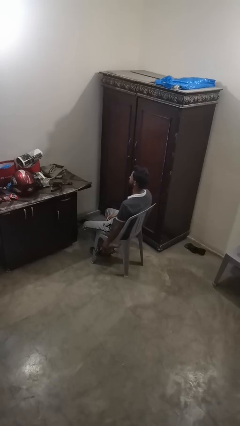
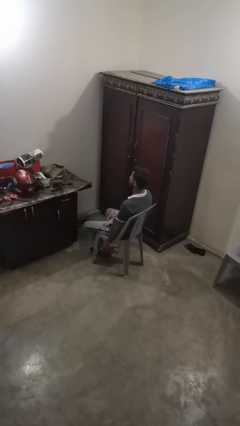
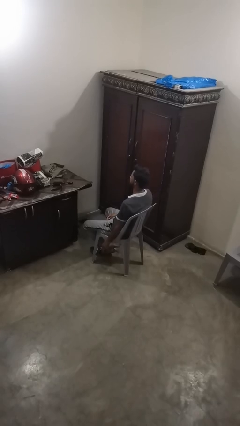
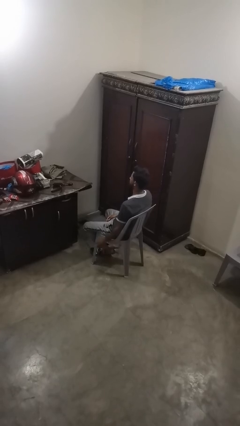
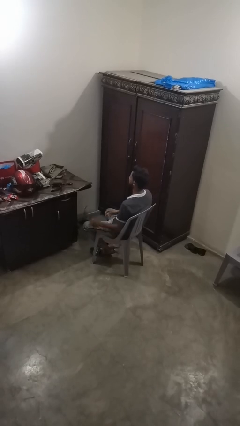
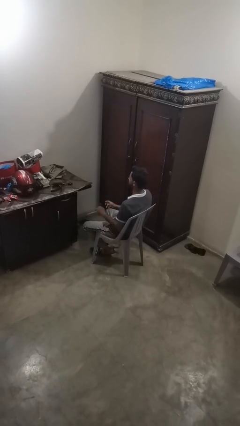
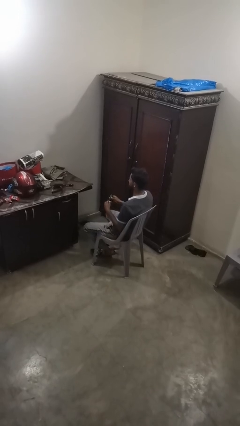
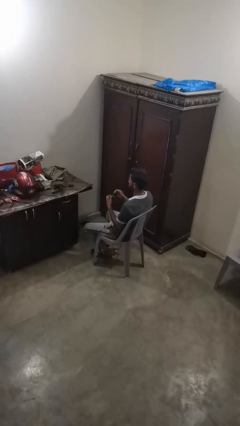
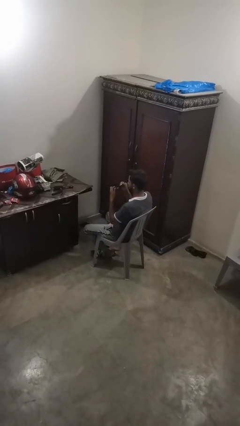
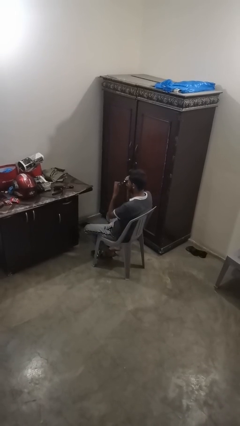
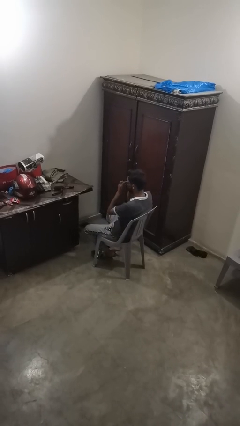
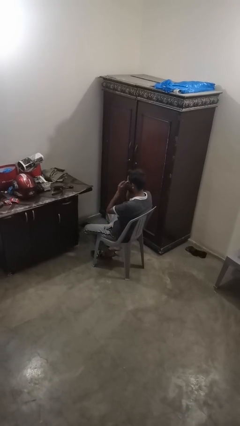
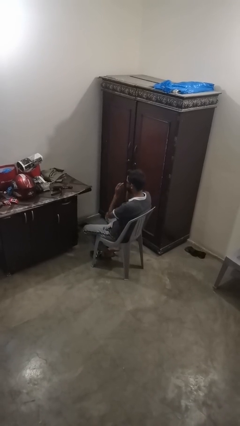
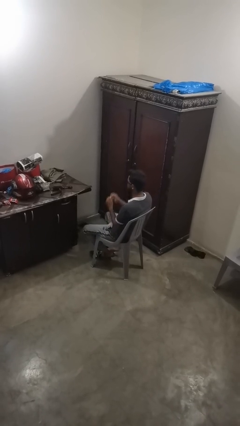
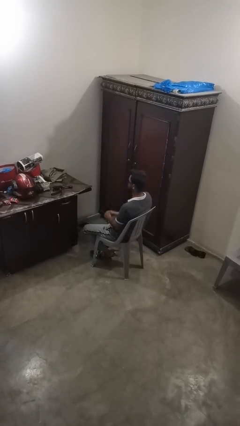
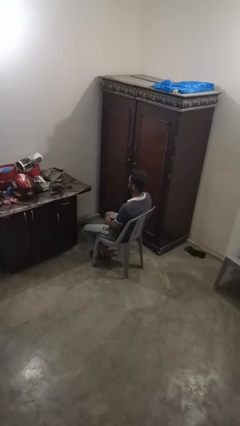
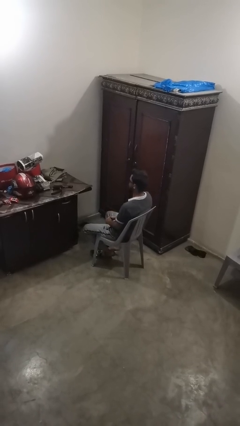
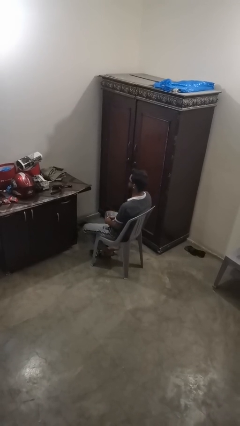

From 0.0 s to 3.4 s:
person puts on sunglasses

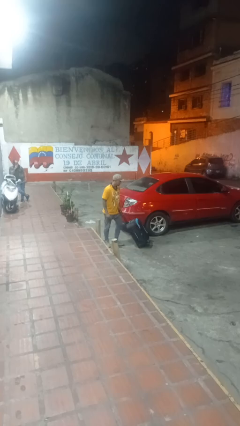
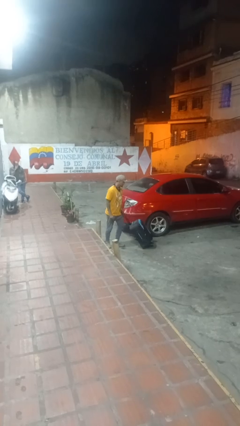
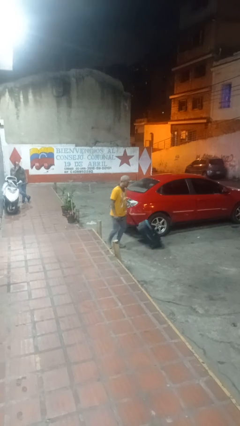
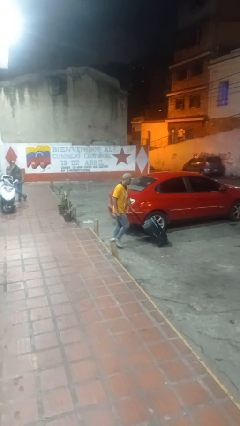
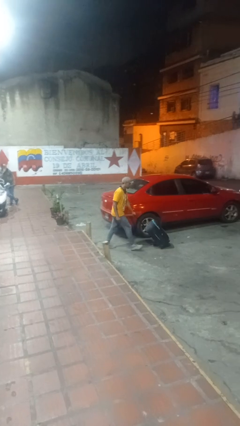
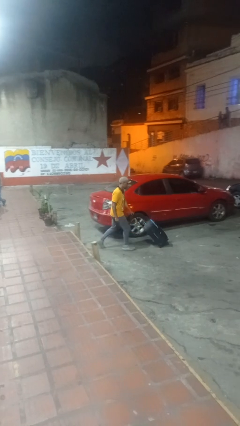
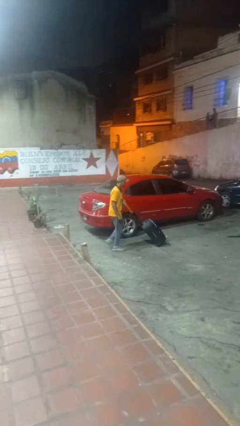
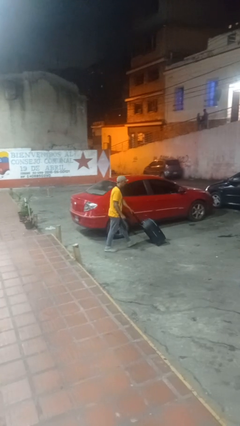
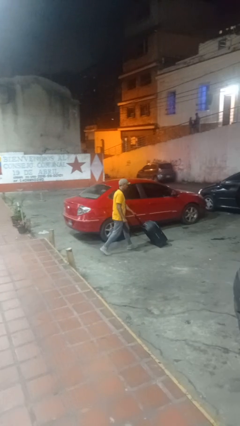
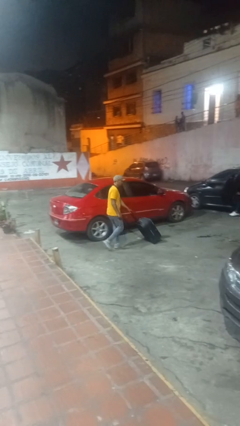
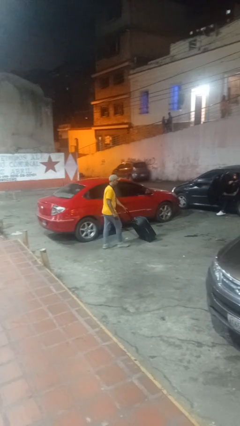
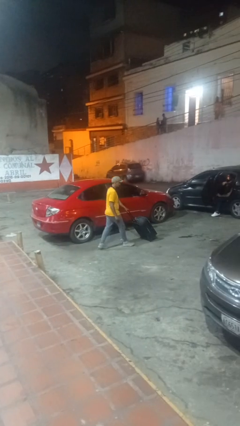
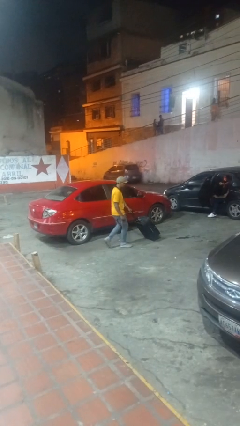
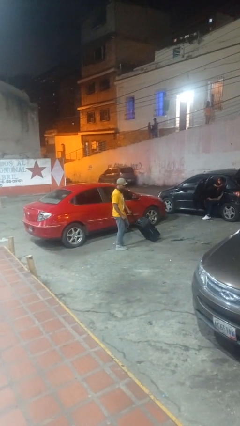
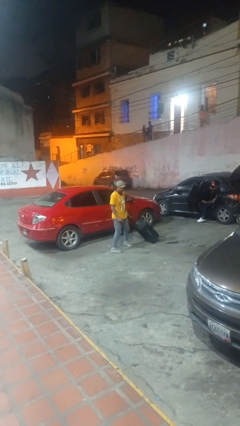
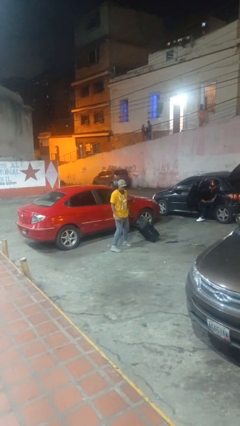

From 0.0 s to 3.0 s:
person pushes wheeled cart

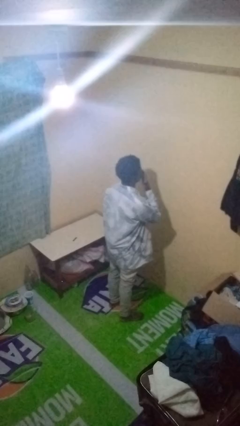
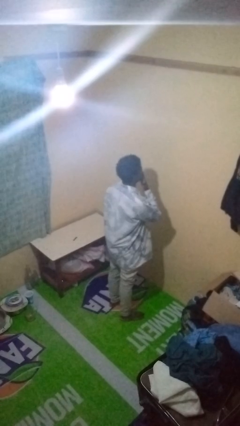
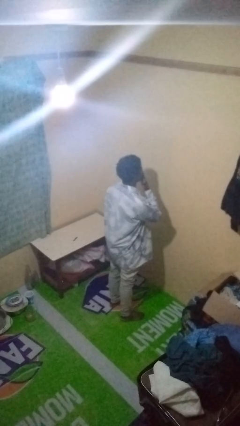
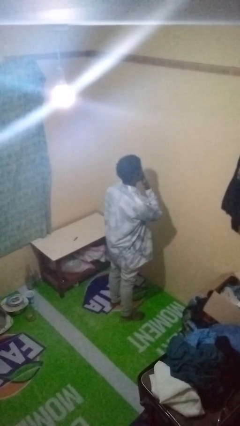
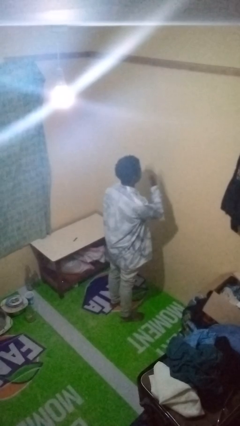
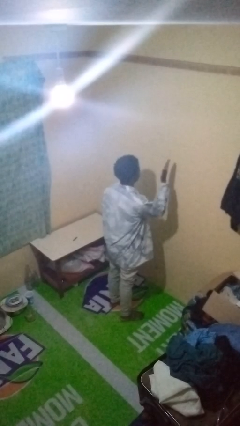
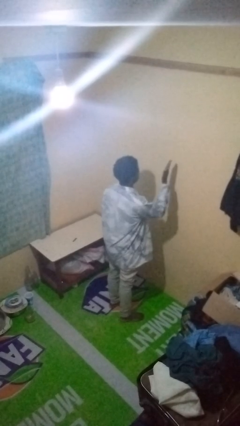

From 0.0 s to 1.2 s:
person gestures blow kiss

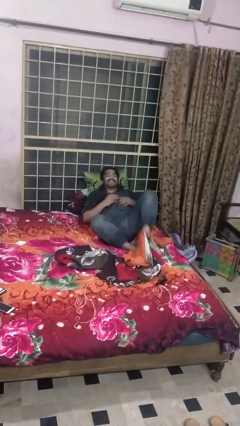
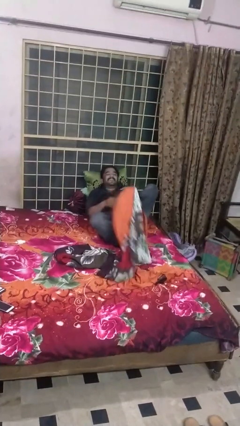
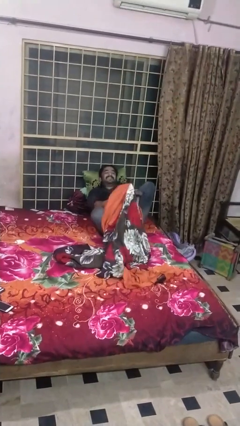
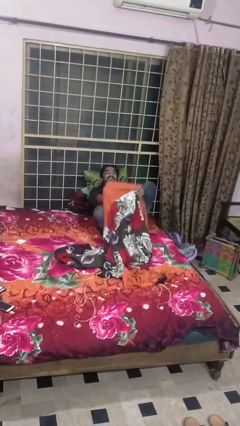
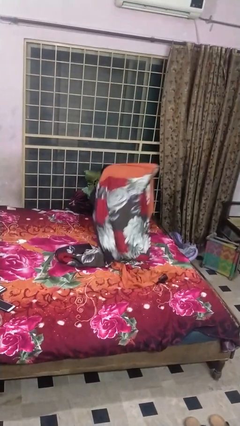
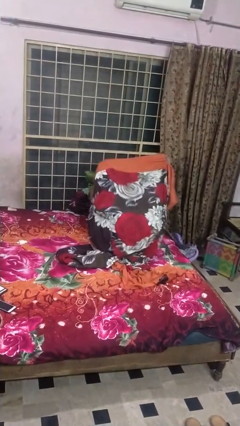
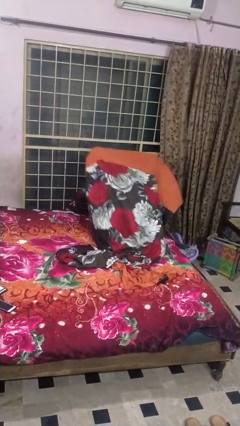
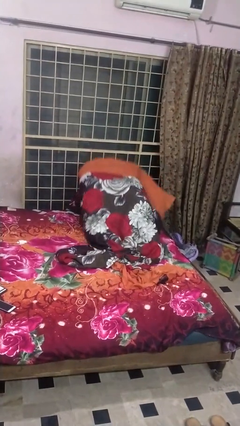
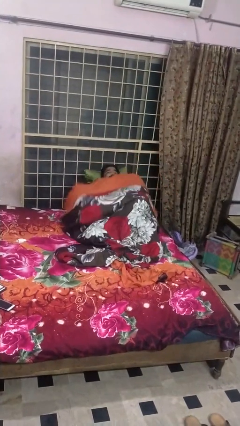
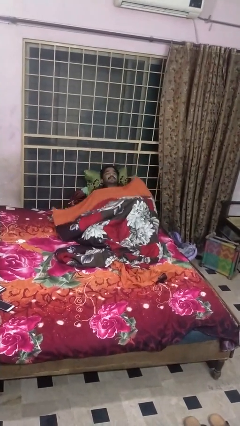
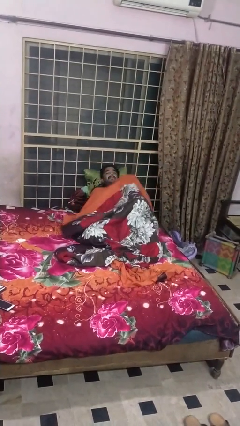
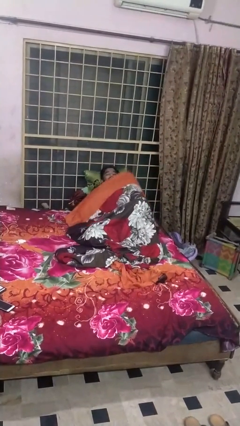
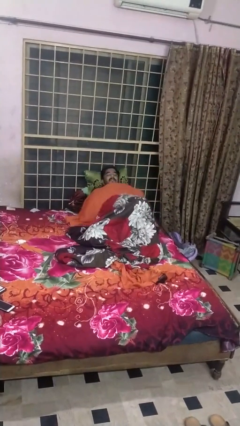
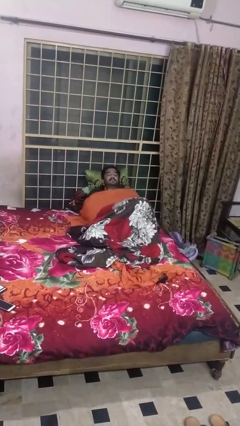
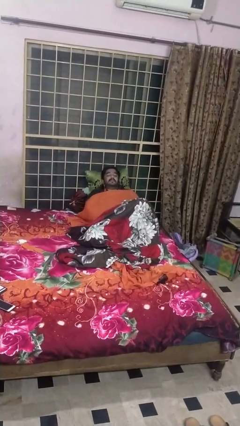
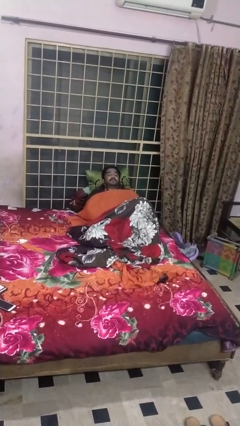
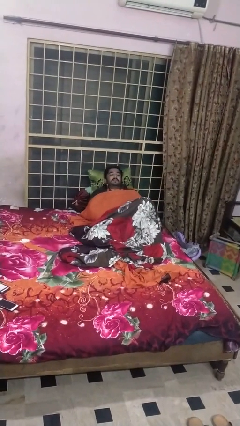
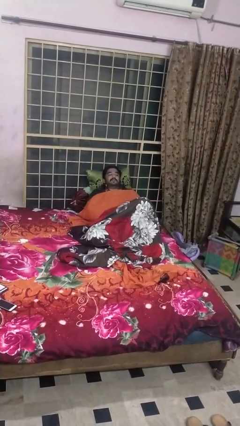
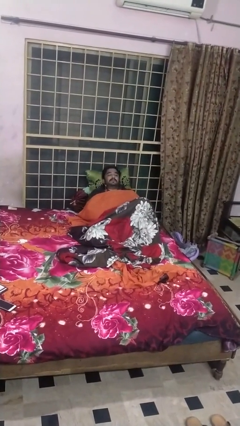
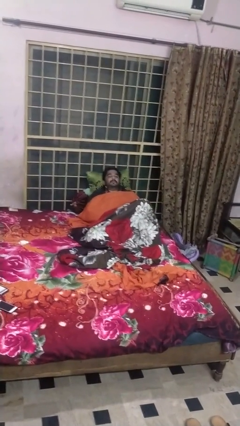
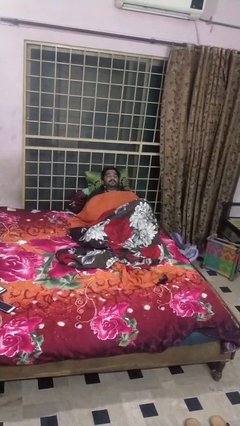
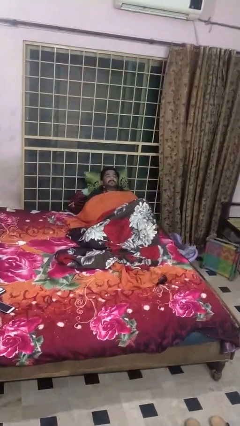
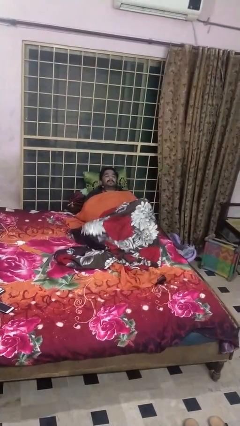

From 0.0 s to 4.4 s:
person covers with bedsheets

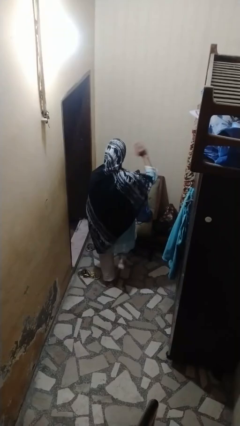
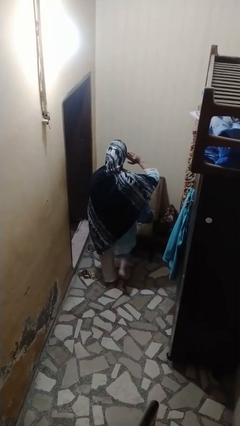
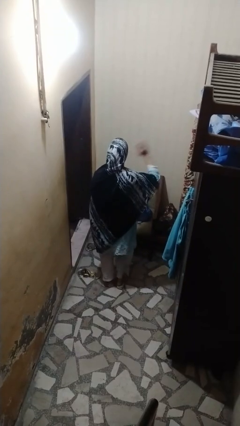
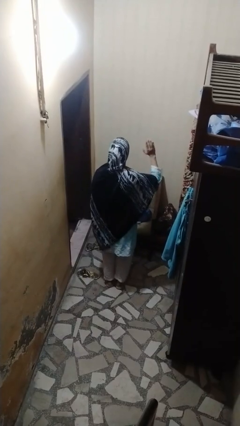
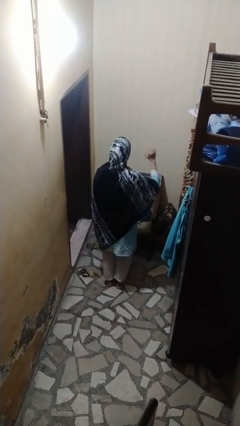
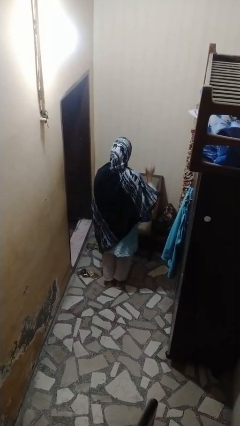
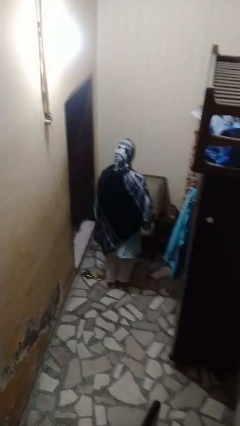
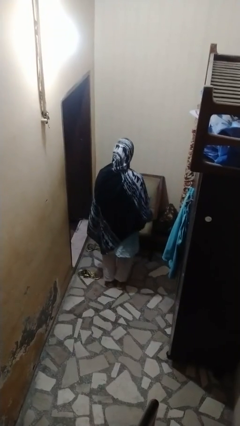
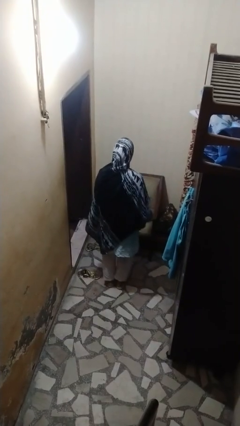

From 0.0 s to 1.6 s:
person salutes

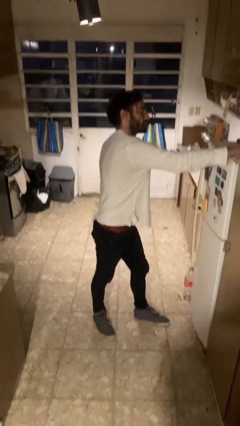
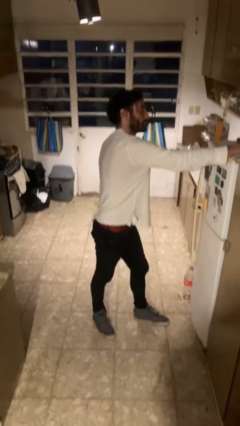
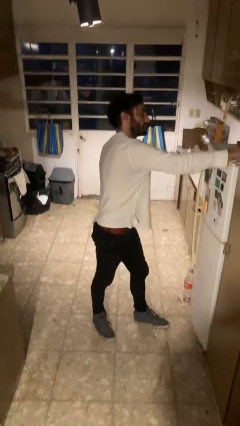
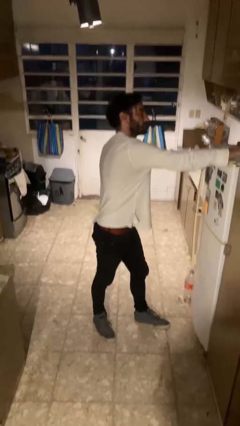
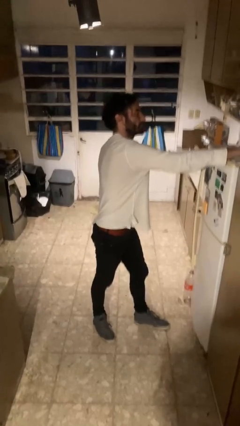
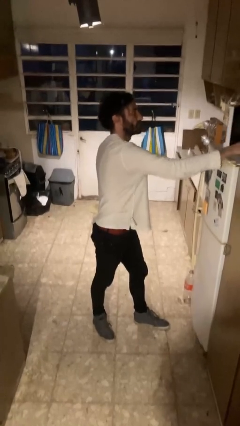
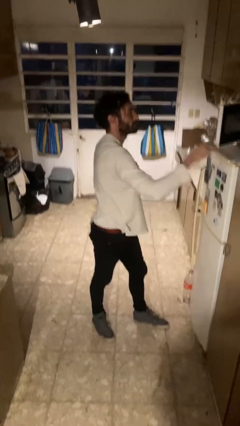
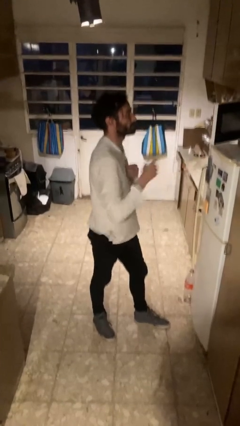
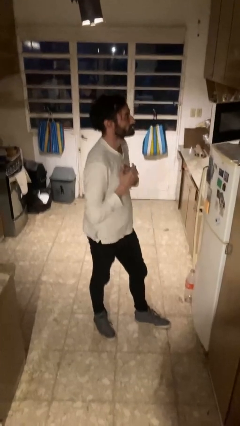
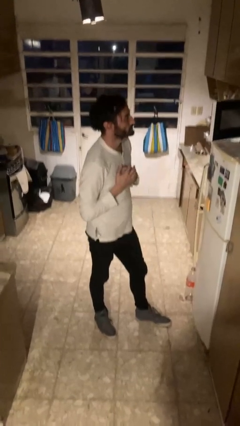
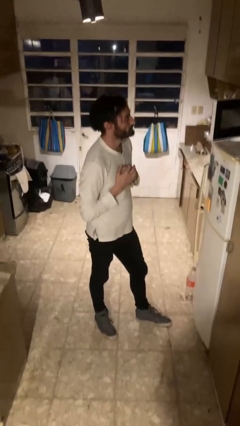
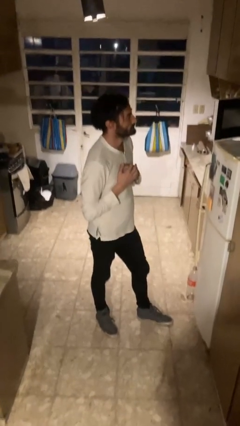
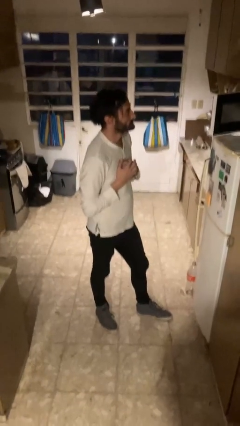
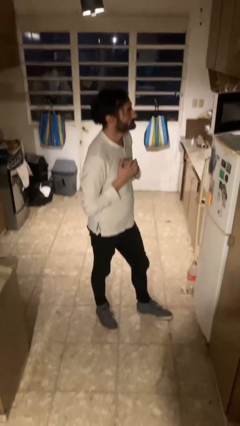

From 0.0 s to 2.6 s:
person opens microwave

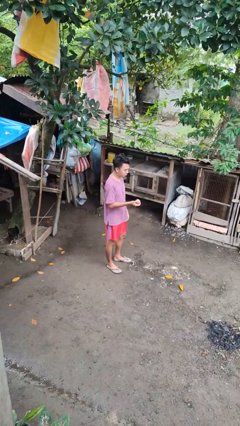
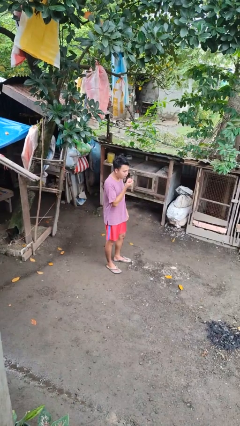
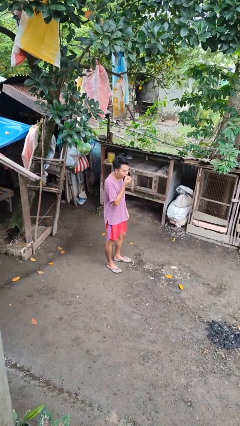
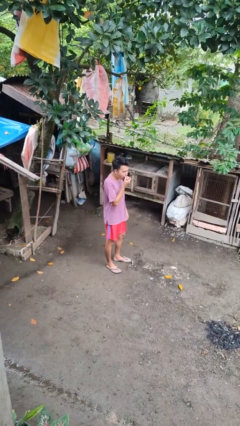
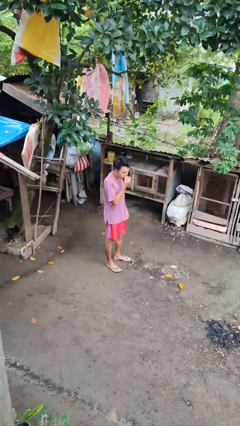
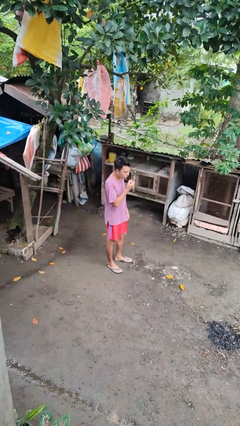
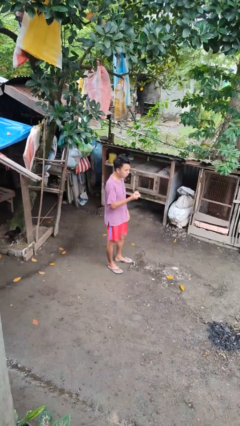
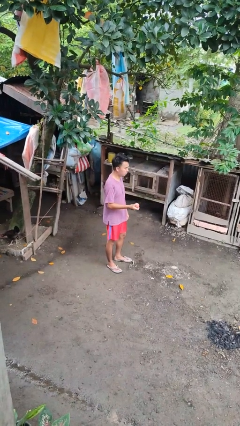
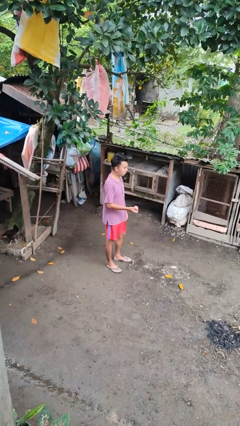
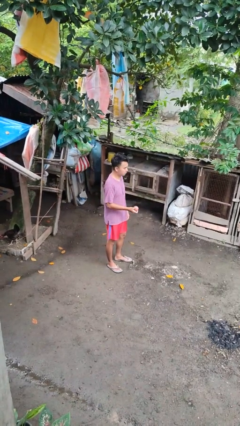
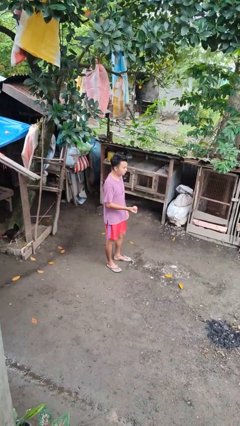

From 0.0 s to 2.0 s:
person eats apple
